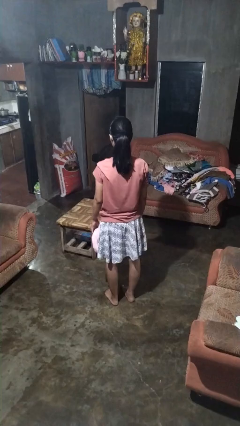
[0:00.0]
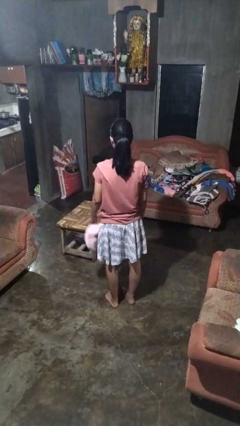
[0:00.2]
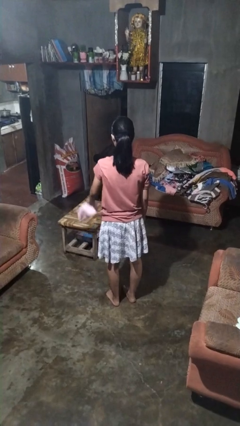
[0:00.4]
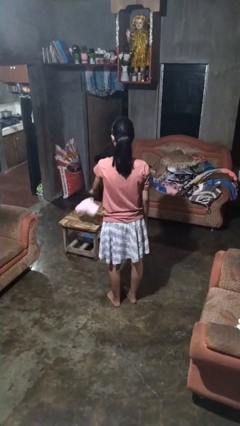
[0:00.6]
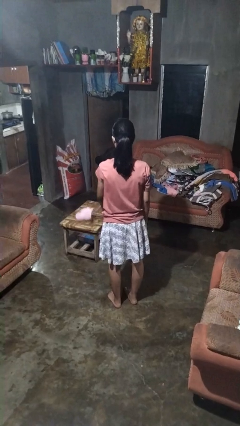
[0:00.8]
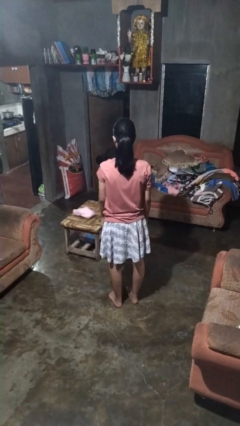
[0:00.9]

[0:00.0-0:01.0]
person throws object on table

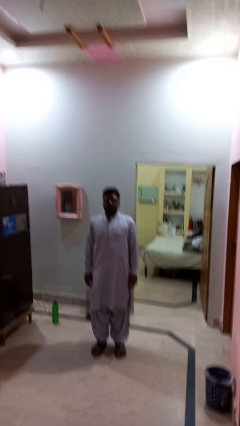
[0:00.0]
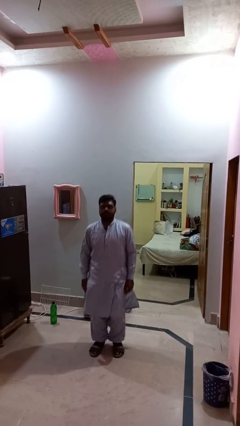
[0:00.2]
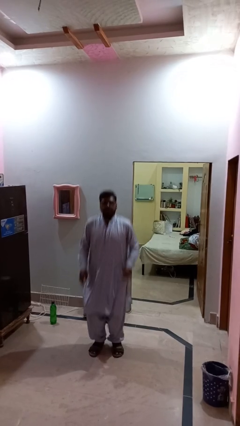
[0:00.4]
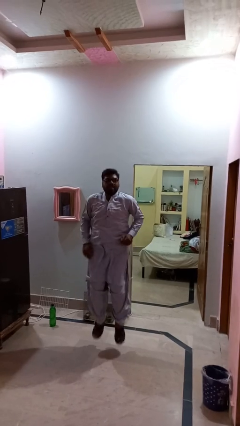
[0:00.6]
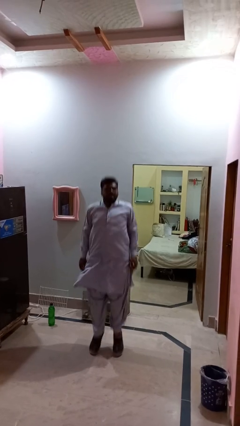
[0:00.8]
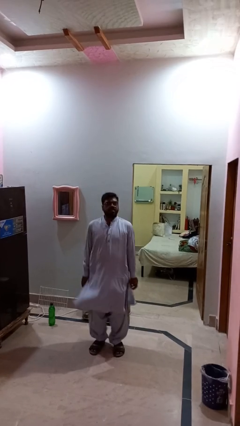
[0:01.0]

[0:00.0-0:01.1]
person jumps

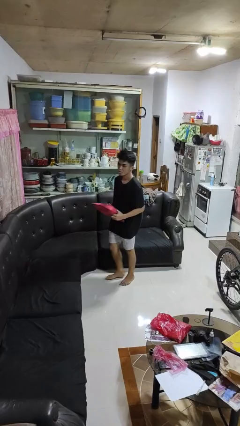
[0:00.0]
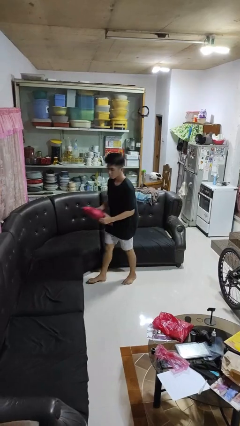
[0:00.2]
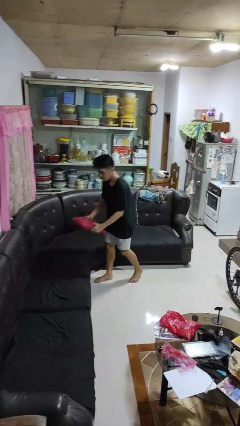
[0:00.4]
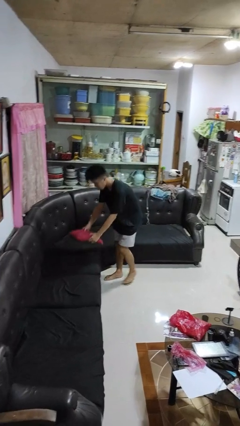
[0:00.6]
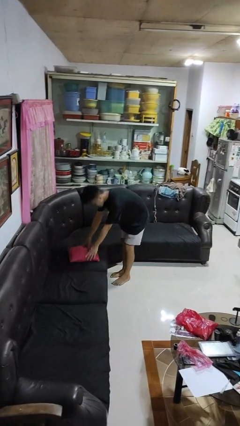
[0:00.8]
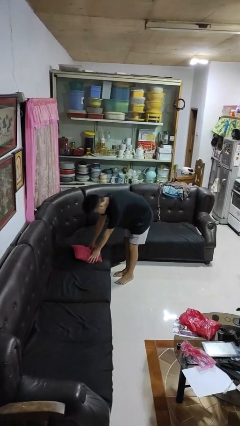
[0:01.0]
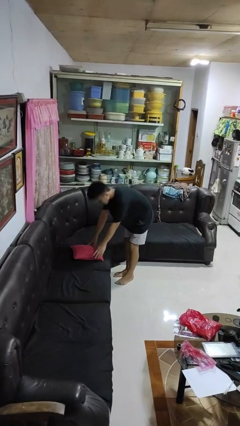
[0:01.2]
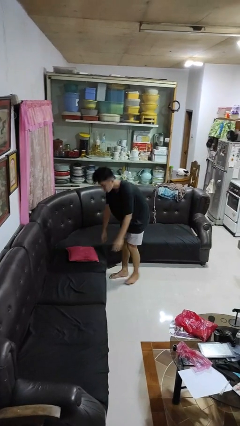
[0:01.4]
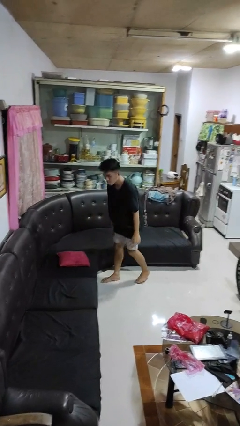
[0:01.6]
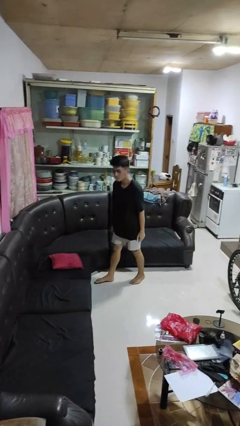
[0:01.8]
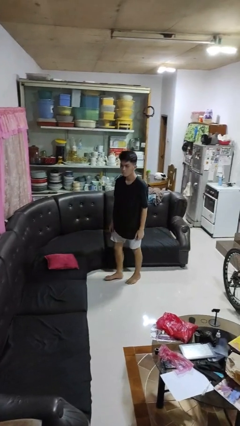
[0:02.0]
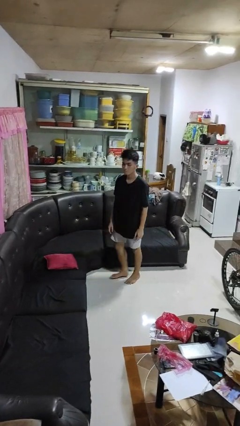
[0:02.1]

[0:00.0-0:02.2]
person puts down object on couch

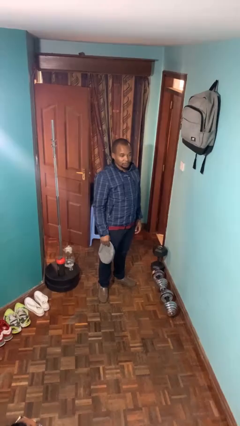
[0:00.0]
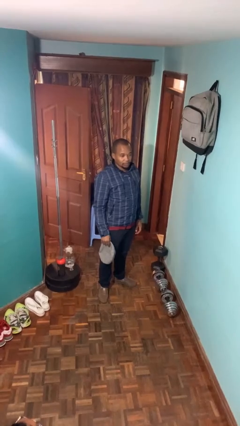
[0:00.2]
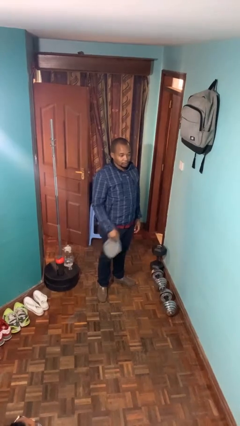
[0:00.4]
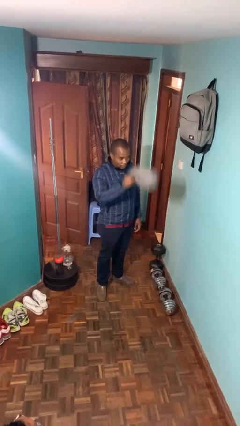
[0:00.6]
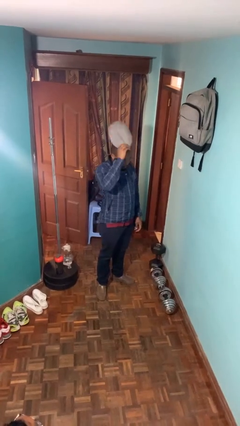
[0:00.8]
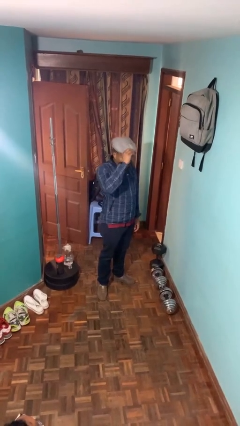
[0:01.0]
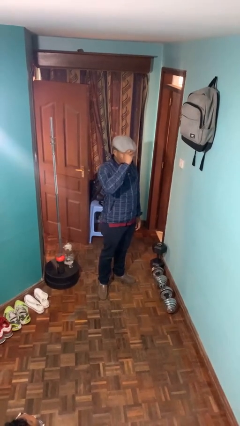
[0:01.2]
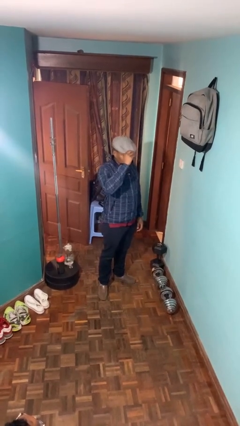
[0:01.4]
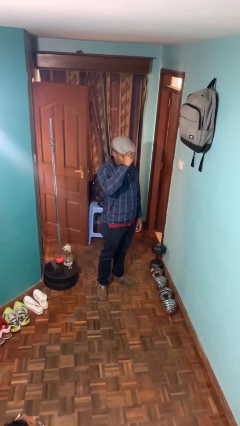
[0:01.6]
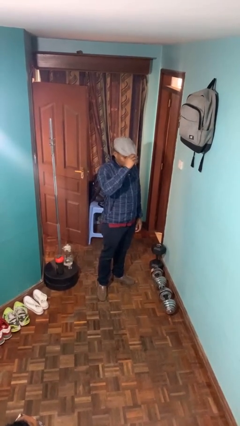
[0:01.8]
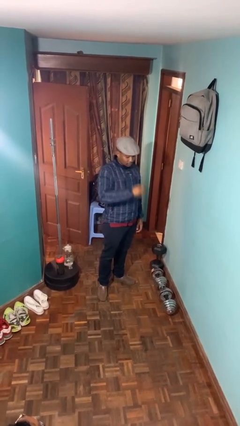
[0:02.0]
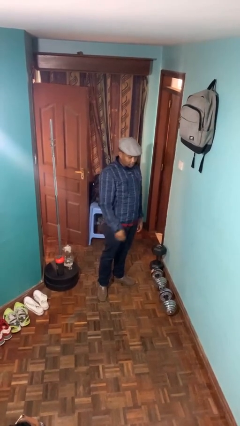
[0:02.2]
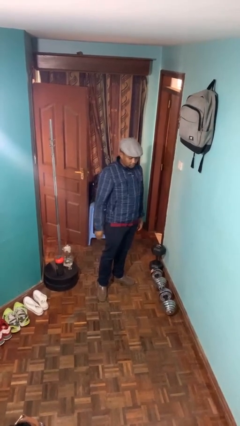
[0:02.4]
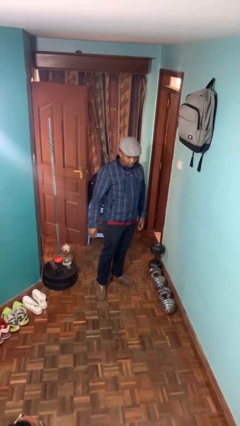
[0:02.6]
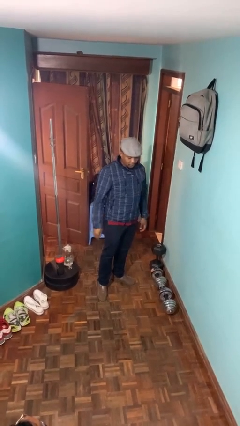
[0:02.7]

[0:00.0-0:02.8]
person puts on hat

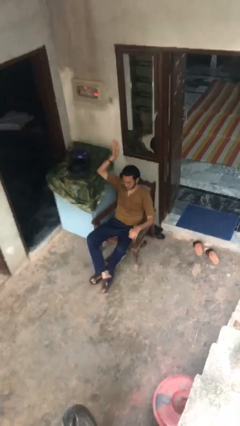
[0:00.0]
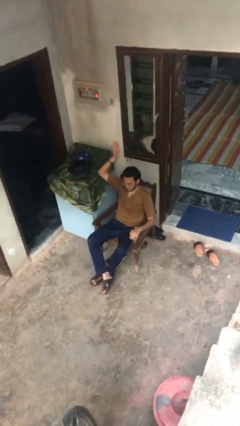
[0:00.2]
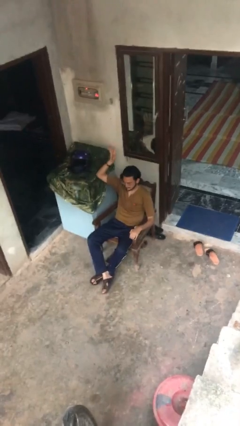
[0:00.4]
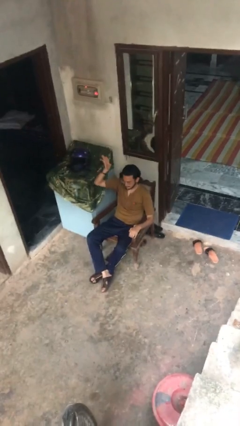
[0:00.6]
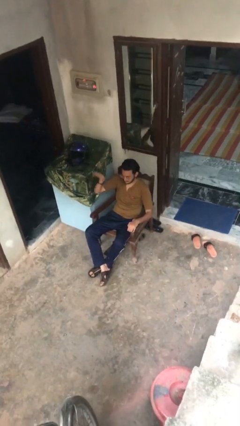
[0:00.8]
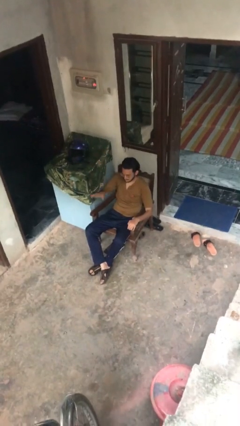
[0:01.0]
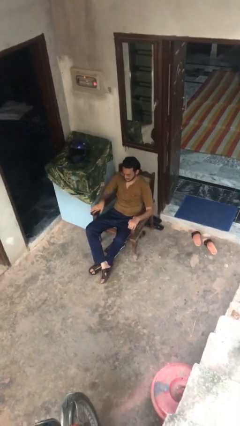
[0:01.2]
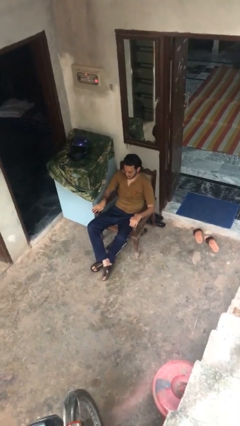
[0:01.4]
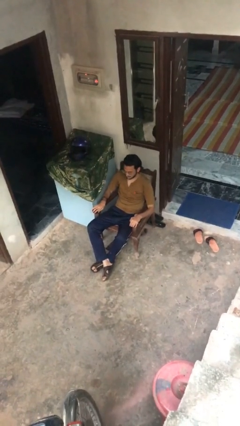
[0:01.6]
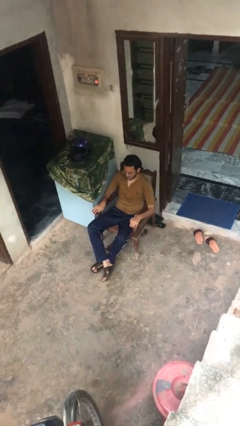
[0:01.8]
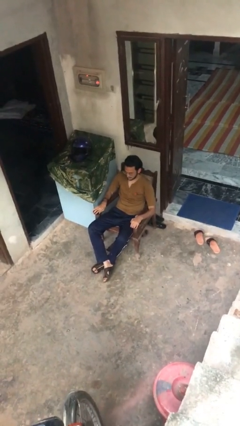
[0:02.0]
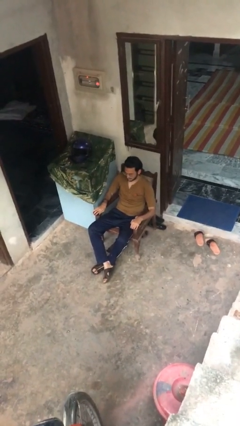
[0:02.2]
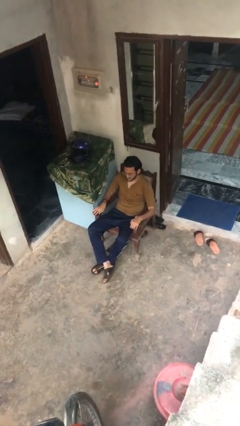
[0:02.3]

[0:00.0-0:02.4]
person gestures lower hand

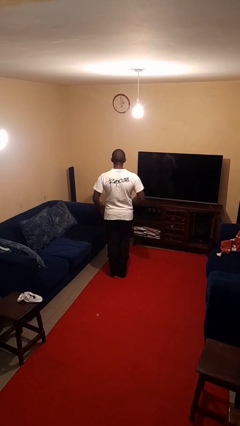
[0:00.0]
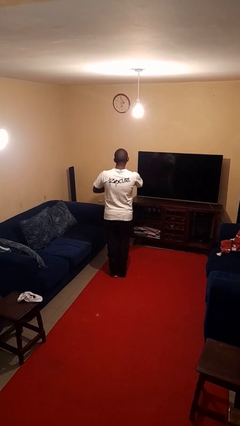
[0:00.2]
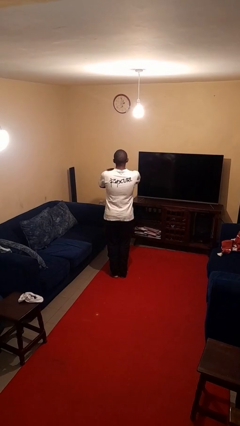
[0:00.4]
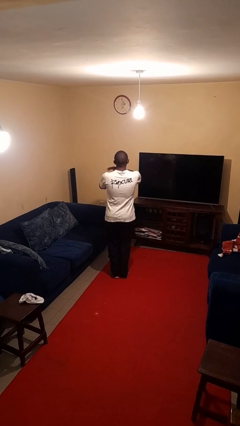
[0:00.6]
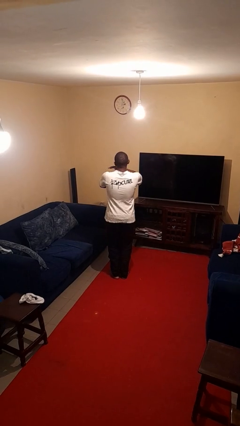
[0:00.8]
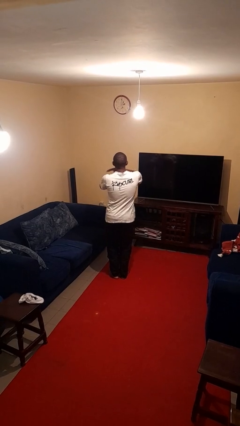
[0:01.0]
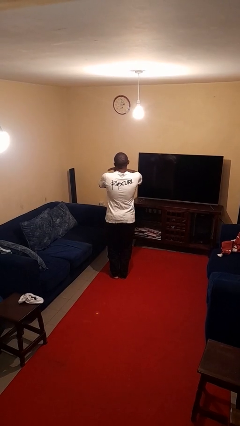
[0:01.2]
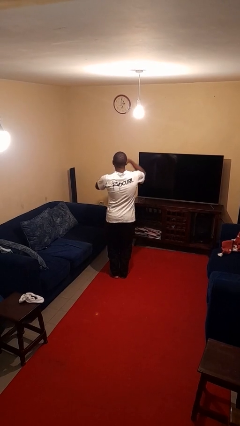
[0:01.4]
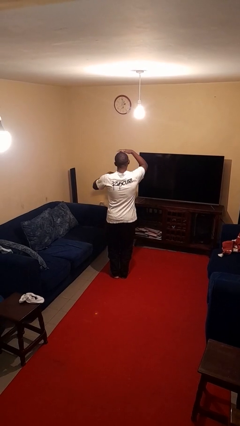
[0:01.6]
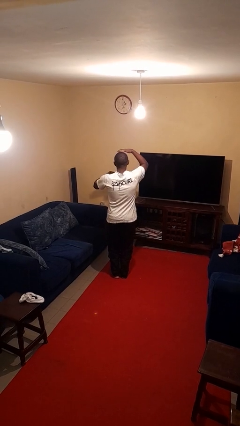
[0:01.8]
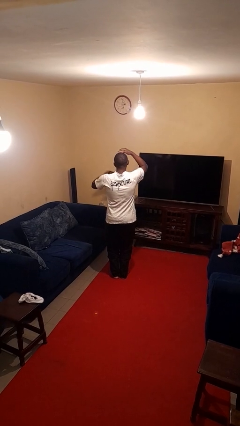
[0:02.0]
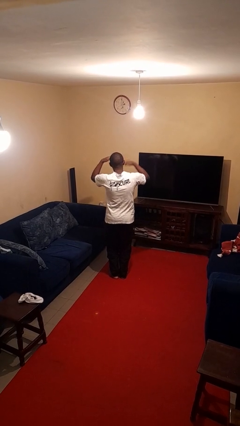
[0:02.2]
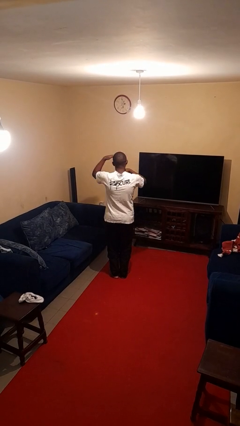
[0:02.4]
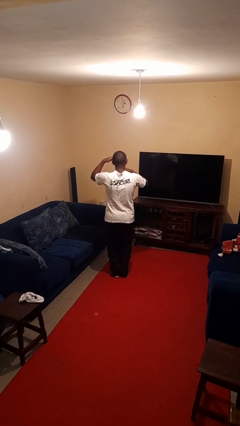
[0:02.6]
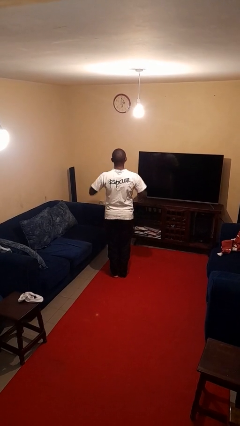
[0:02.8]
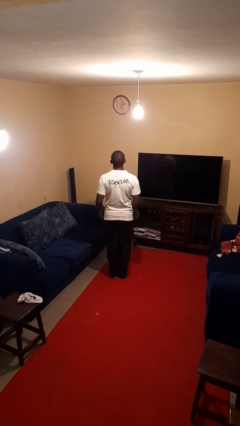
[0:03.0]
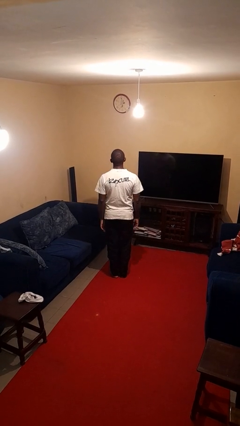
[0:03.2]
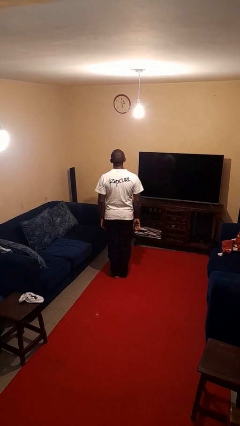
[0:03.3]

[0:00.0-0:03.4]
person dances in place

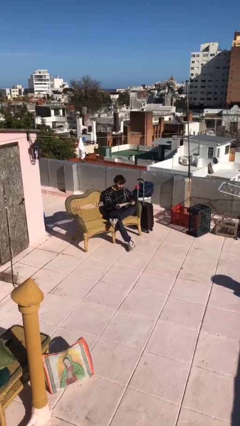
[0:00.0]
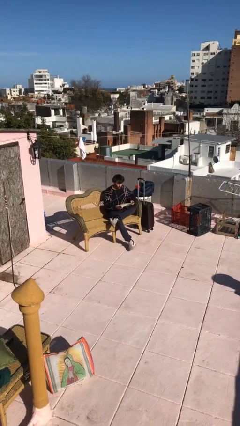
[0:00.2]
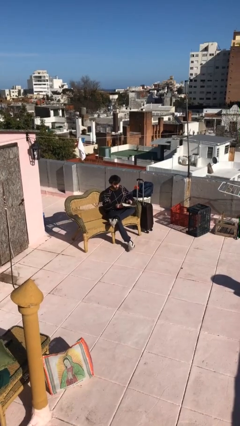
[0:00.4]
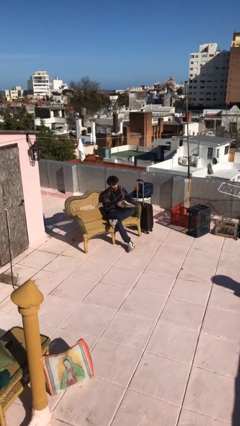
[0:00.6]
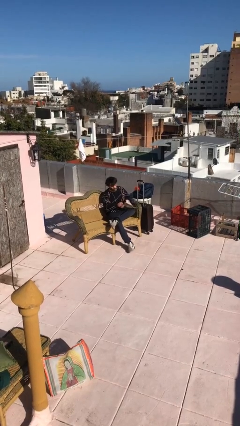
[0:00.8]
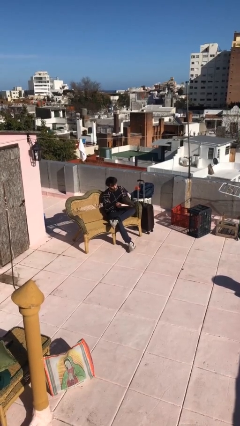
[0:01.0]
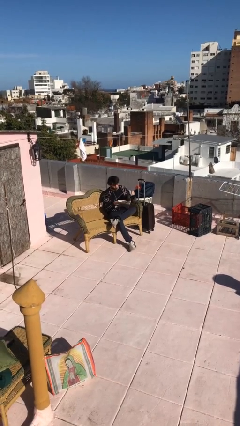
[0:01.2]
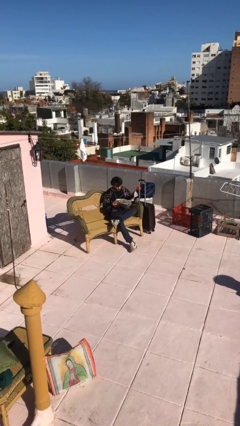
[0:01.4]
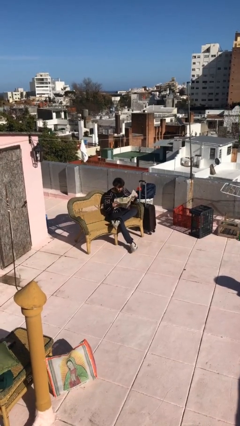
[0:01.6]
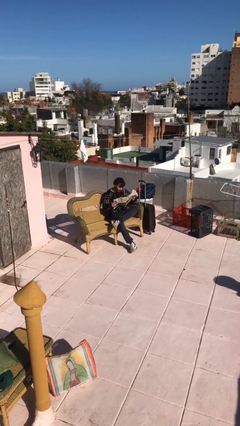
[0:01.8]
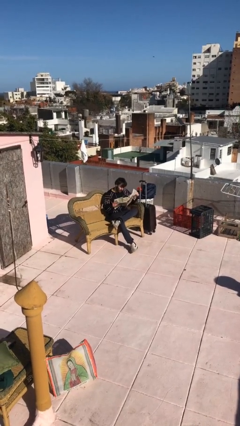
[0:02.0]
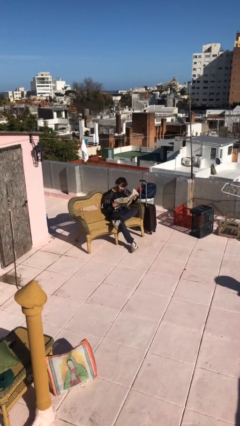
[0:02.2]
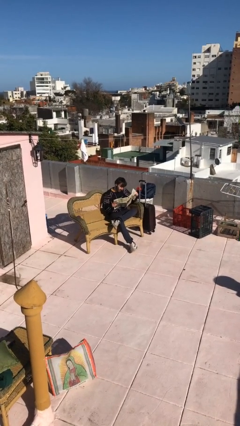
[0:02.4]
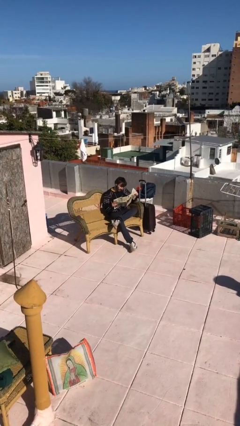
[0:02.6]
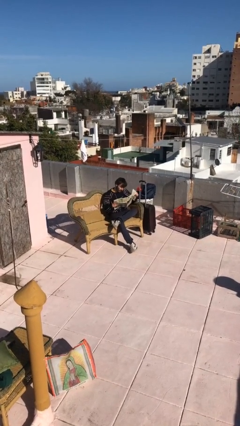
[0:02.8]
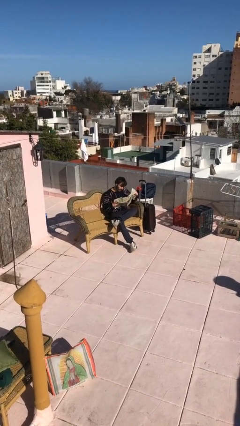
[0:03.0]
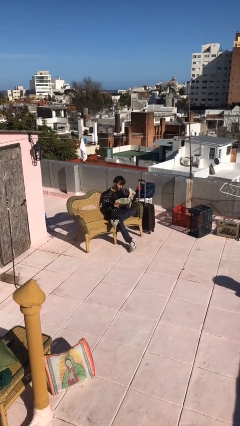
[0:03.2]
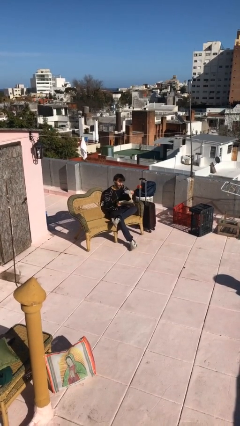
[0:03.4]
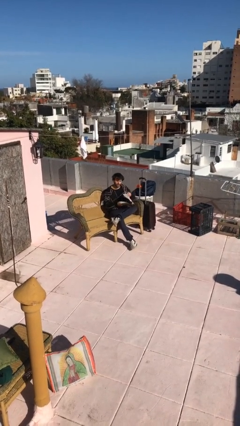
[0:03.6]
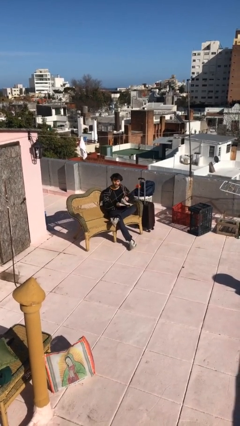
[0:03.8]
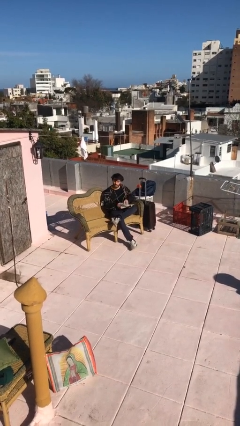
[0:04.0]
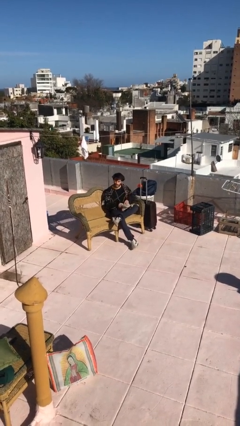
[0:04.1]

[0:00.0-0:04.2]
person reads newspaper

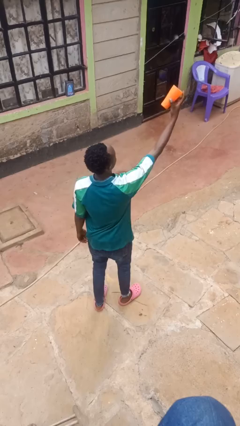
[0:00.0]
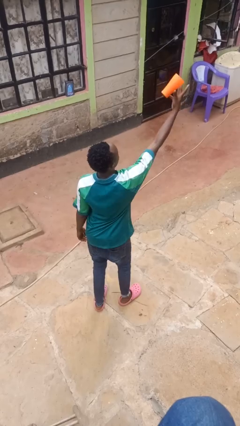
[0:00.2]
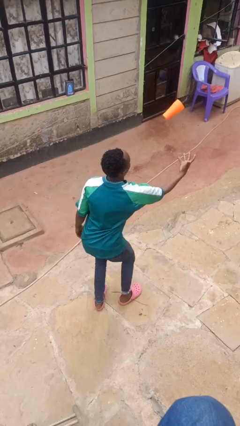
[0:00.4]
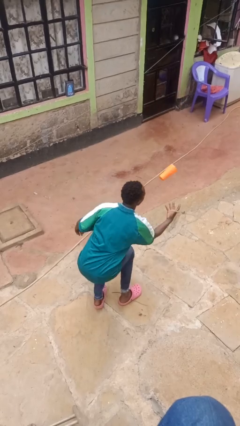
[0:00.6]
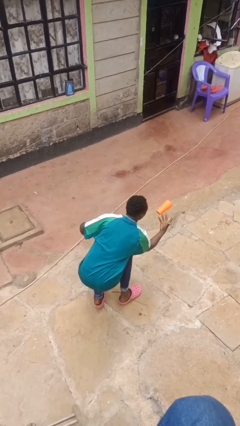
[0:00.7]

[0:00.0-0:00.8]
person drops object
